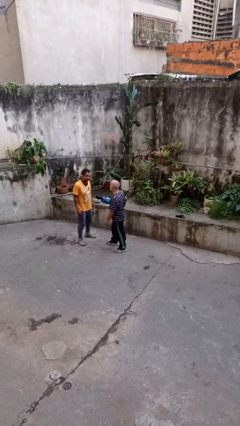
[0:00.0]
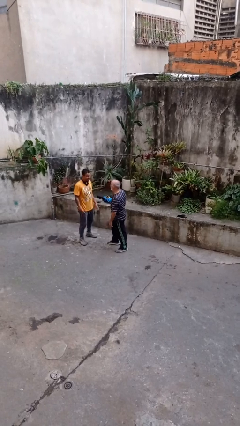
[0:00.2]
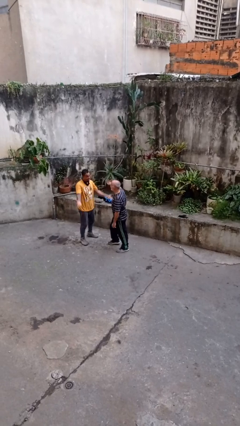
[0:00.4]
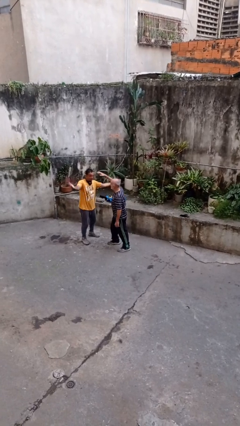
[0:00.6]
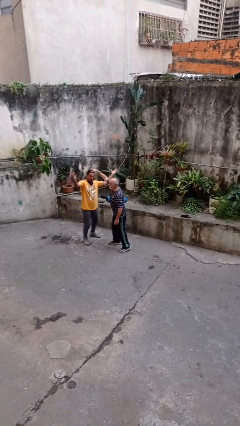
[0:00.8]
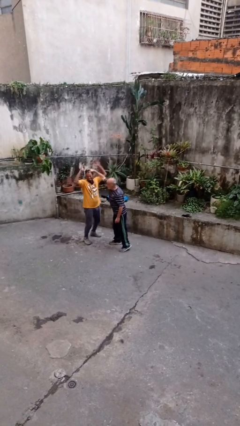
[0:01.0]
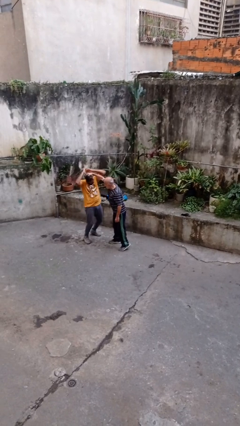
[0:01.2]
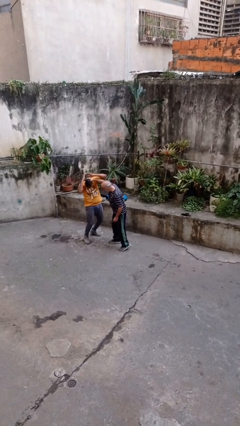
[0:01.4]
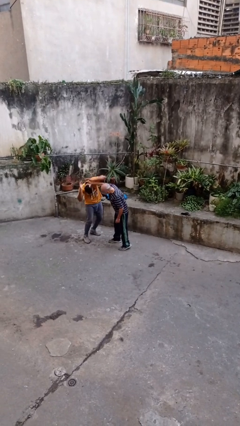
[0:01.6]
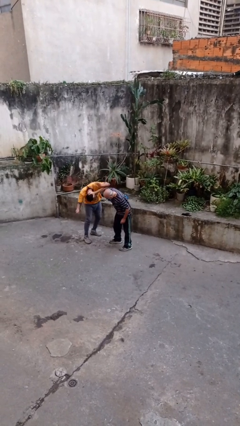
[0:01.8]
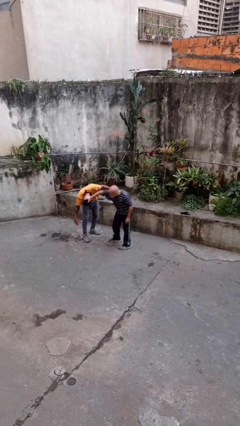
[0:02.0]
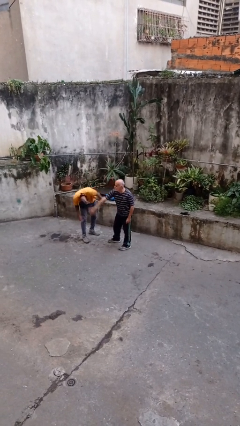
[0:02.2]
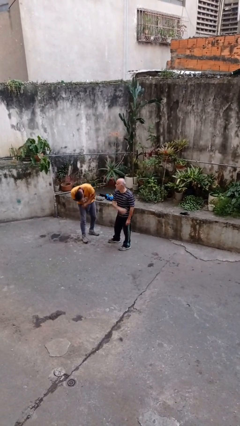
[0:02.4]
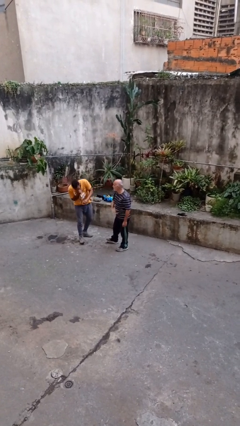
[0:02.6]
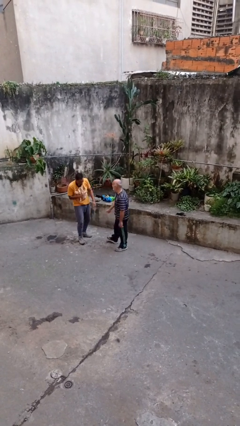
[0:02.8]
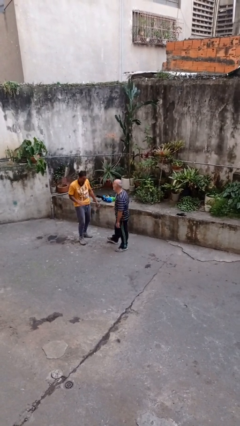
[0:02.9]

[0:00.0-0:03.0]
person grabs person by hair

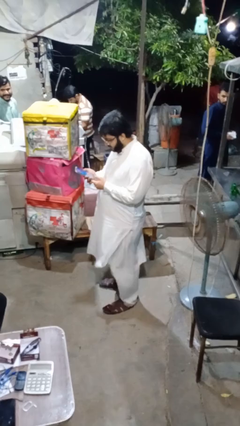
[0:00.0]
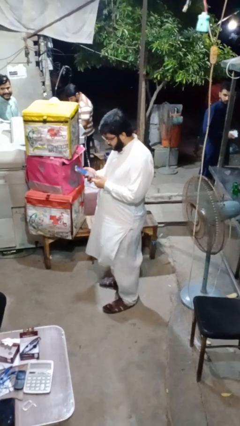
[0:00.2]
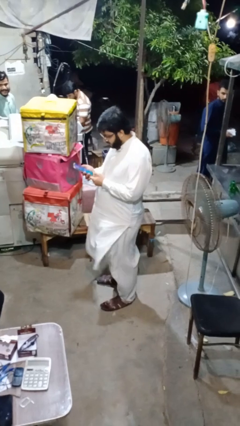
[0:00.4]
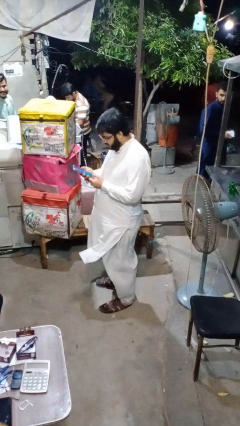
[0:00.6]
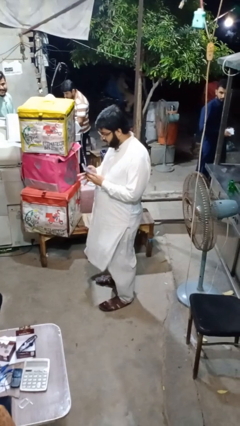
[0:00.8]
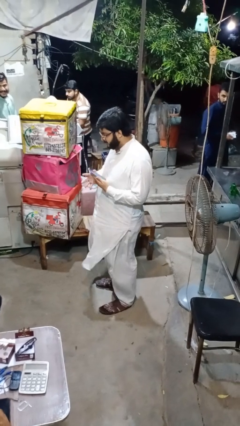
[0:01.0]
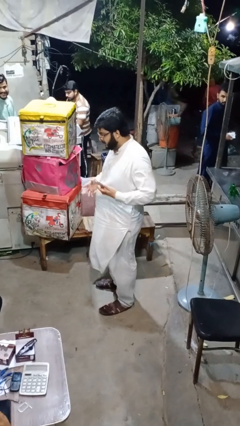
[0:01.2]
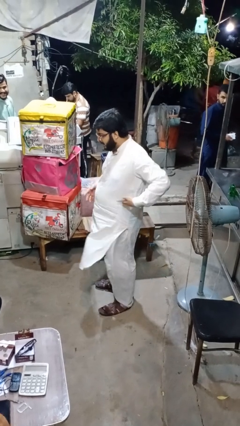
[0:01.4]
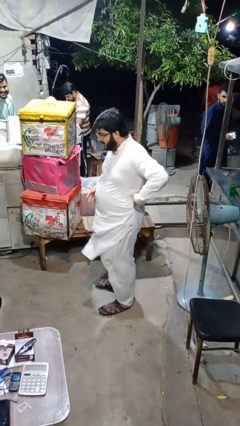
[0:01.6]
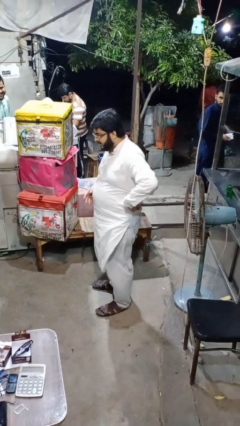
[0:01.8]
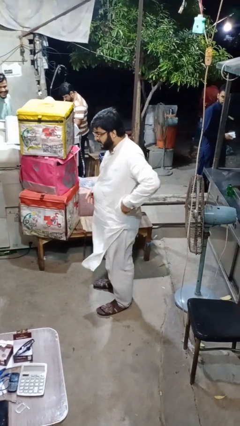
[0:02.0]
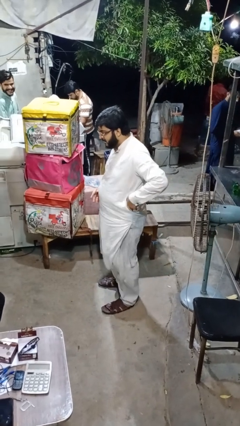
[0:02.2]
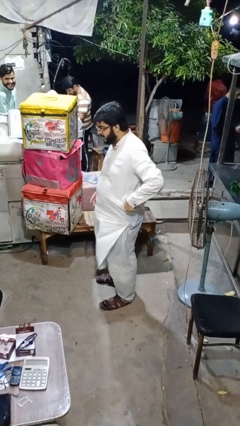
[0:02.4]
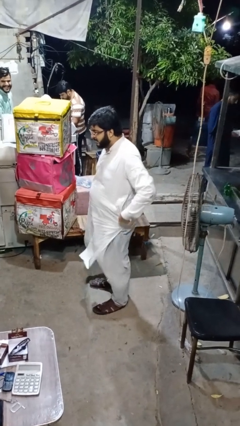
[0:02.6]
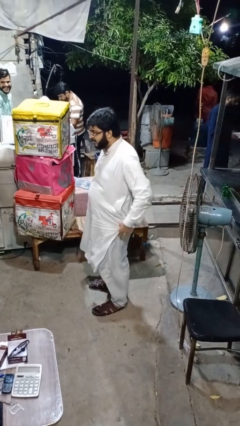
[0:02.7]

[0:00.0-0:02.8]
person puts phone into pocket

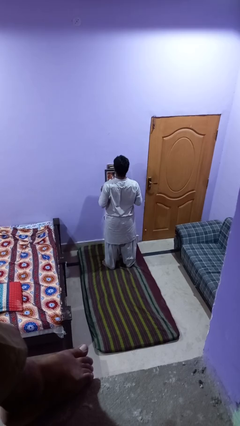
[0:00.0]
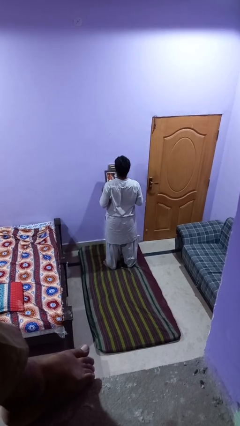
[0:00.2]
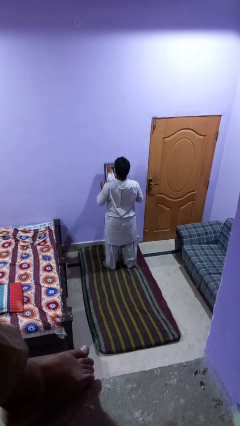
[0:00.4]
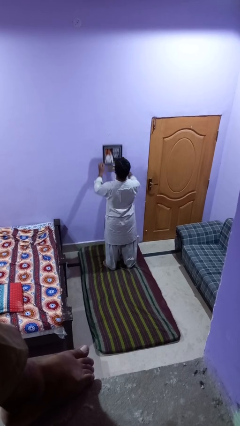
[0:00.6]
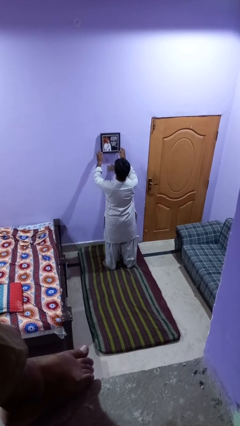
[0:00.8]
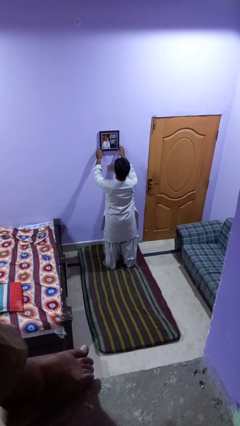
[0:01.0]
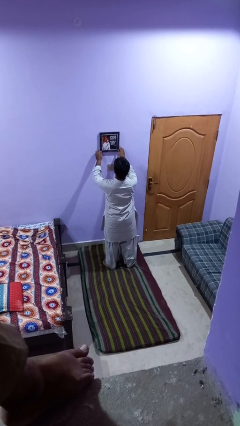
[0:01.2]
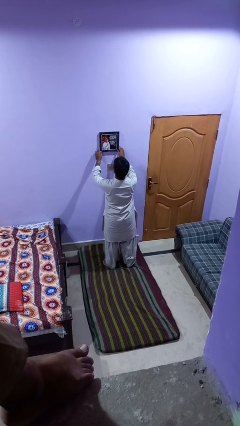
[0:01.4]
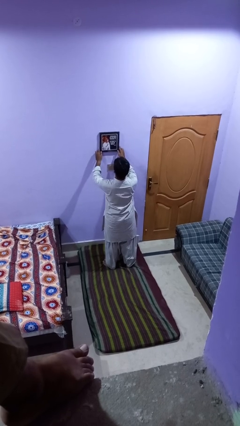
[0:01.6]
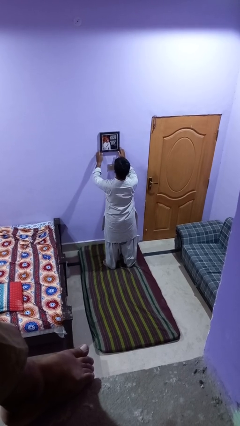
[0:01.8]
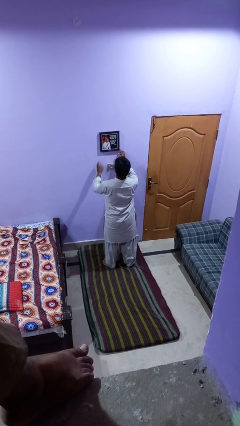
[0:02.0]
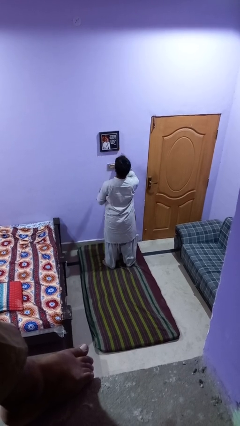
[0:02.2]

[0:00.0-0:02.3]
person puts up picture frame

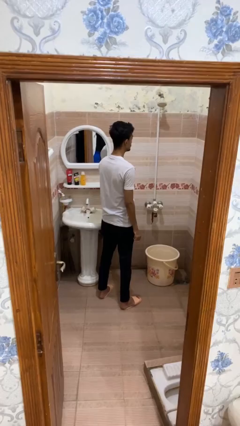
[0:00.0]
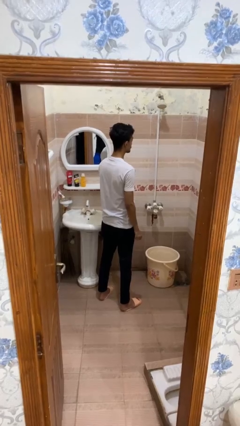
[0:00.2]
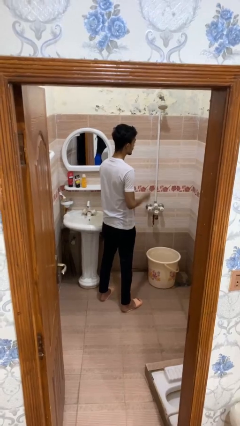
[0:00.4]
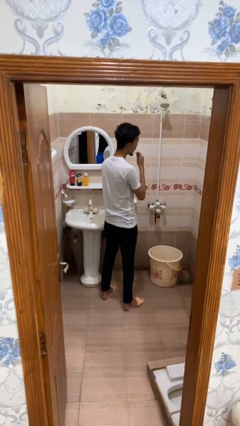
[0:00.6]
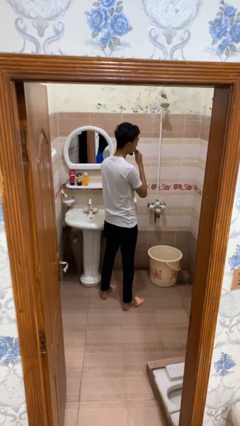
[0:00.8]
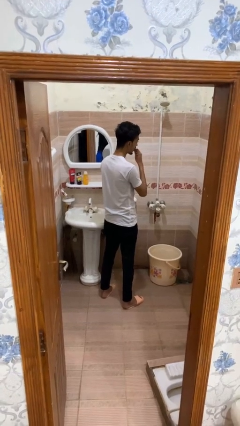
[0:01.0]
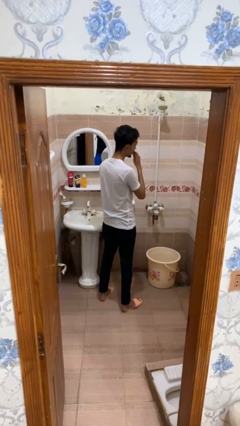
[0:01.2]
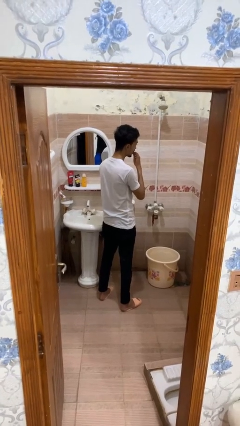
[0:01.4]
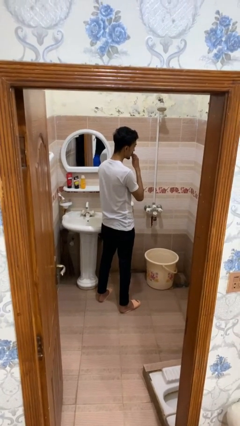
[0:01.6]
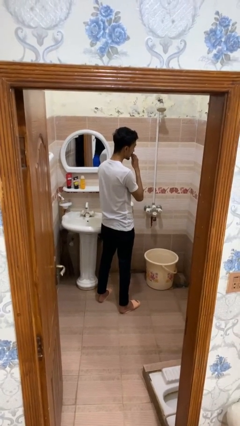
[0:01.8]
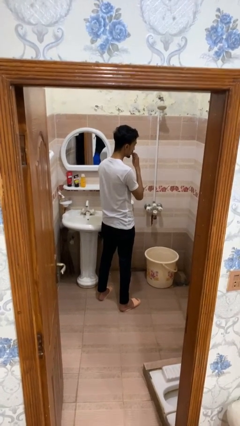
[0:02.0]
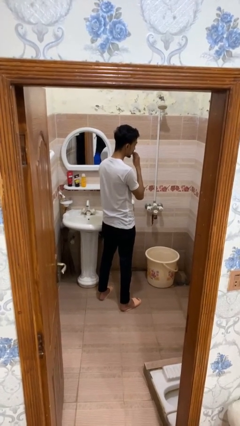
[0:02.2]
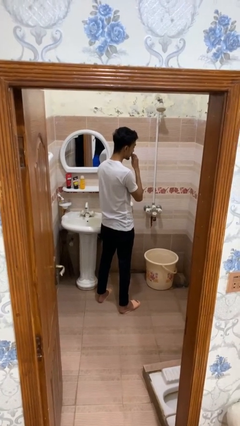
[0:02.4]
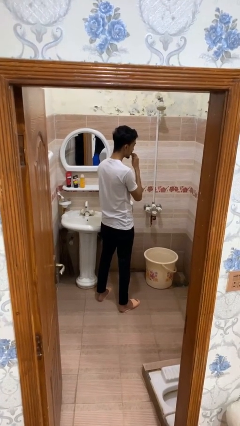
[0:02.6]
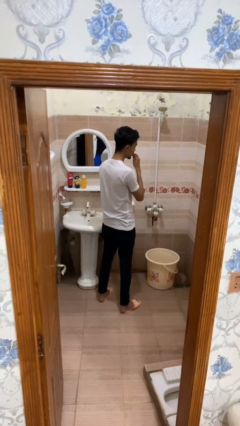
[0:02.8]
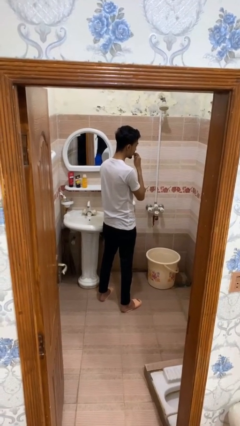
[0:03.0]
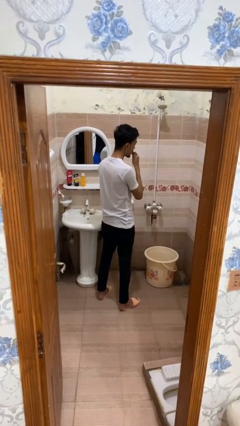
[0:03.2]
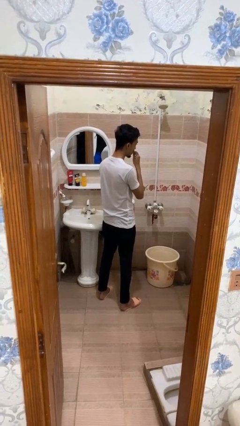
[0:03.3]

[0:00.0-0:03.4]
person flosses

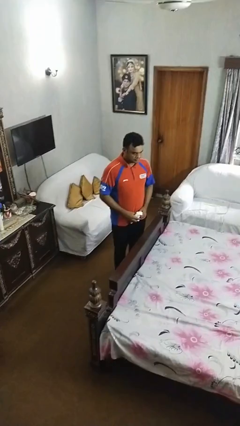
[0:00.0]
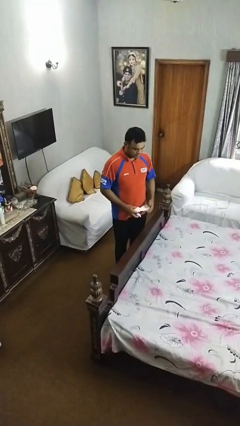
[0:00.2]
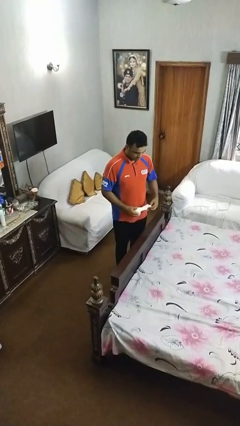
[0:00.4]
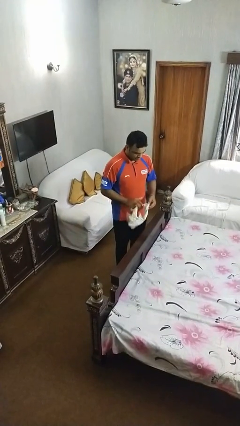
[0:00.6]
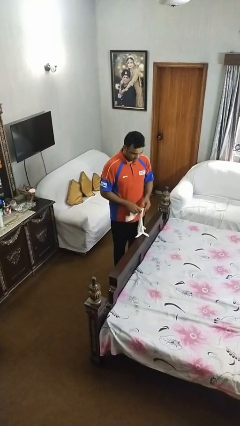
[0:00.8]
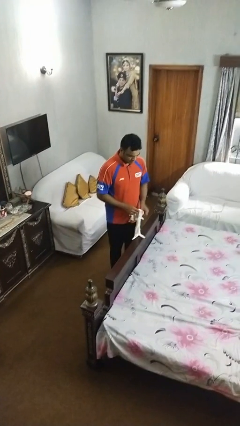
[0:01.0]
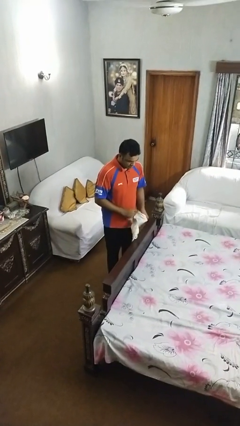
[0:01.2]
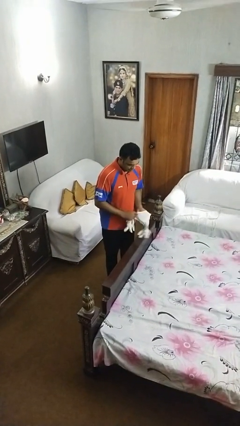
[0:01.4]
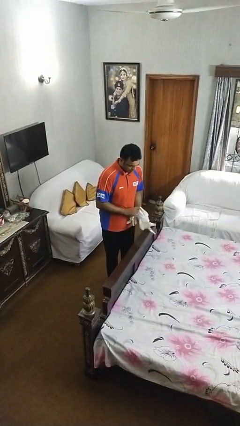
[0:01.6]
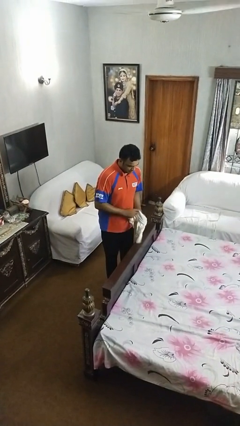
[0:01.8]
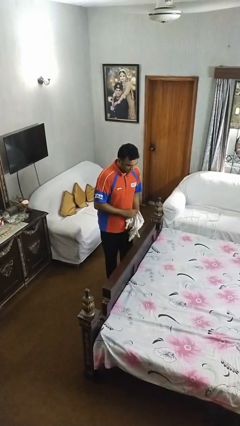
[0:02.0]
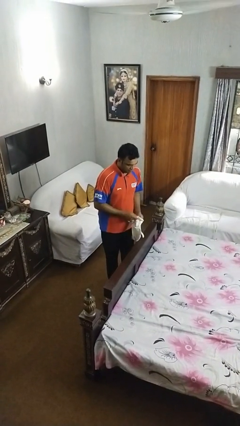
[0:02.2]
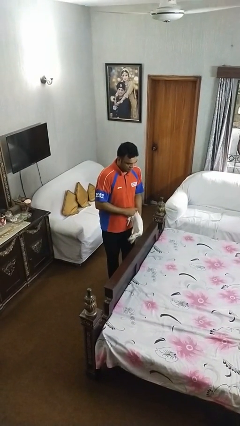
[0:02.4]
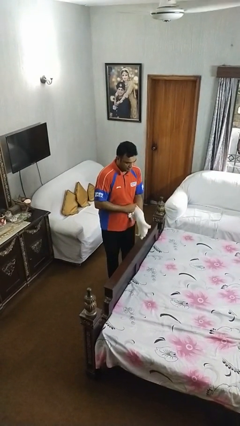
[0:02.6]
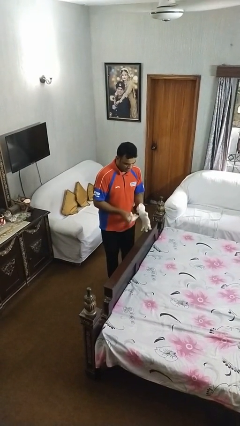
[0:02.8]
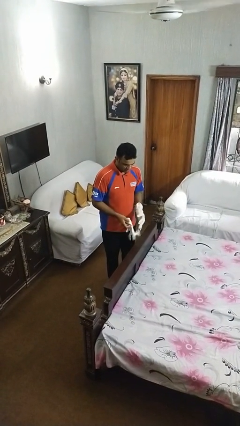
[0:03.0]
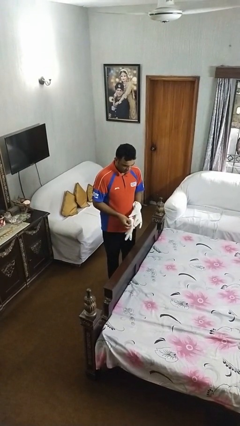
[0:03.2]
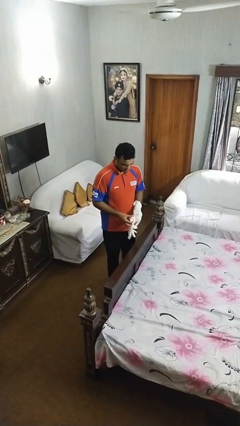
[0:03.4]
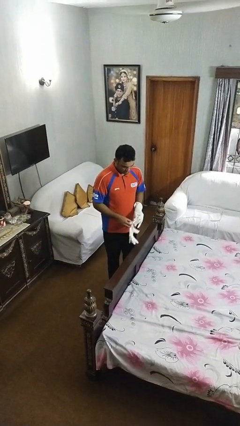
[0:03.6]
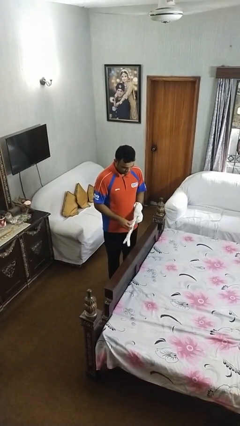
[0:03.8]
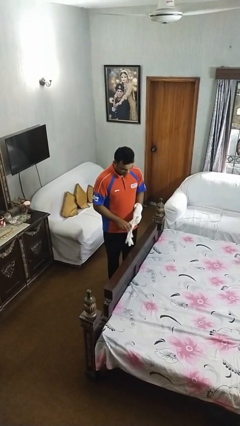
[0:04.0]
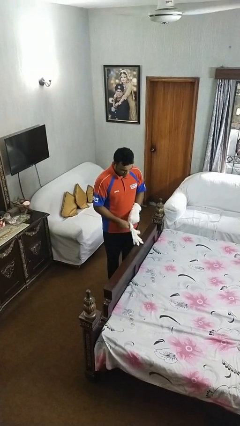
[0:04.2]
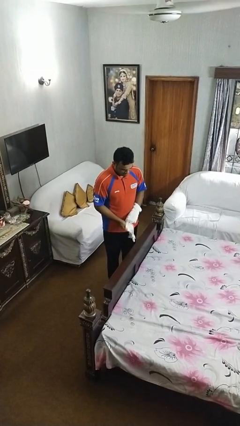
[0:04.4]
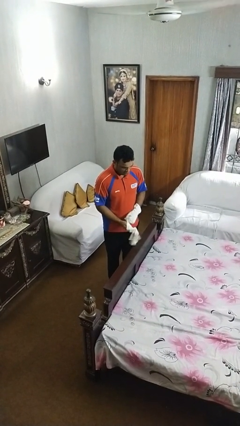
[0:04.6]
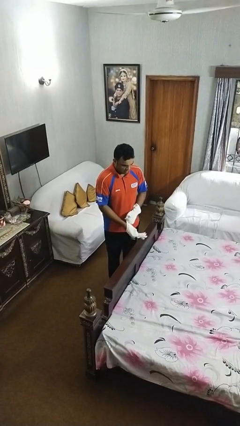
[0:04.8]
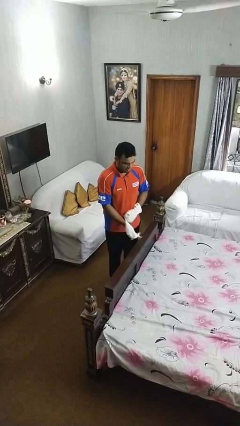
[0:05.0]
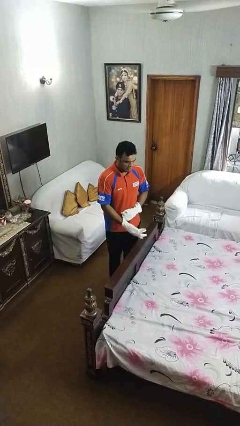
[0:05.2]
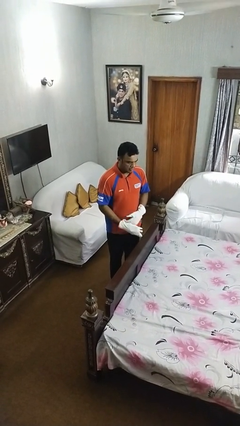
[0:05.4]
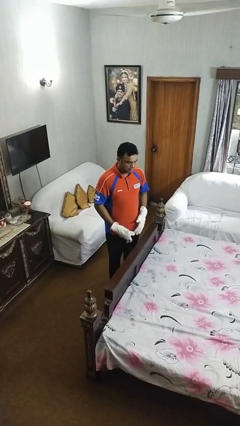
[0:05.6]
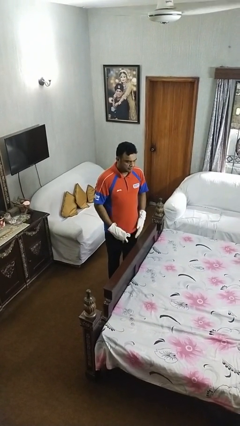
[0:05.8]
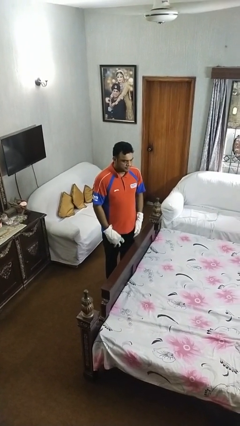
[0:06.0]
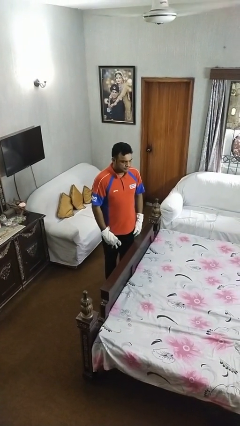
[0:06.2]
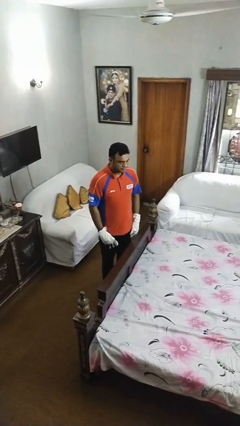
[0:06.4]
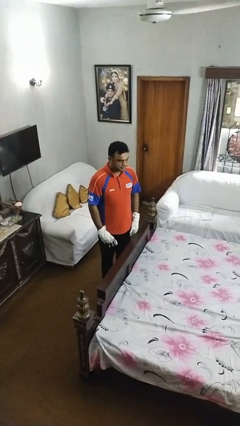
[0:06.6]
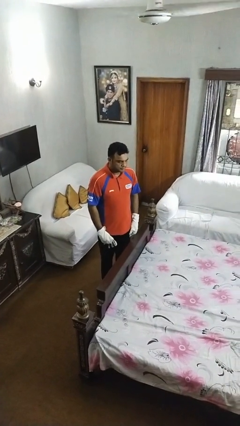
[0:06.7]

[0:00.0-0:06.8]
person puts on gloves
